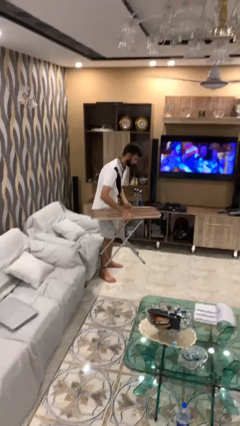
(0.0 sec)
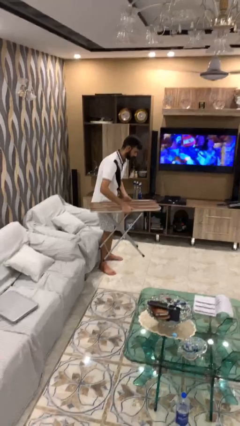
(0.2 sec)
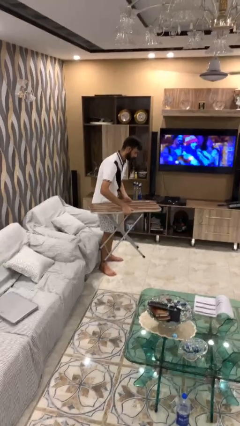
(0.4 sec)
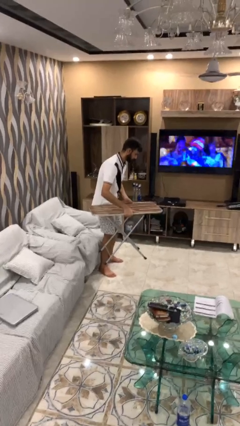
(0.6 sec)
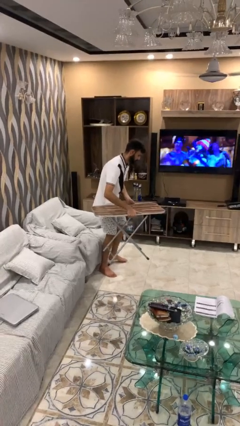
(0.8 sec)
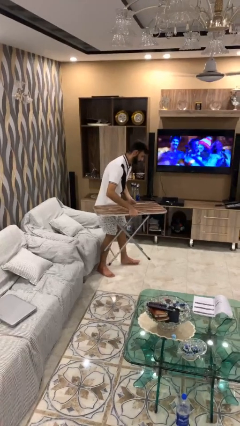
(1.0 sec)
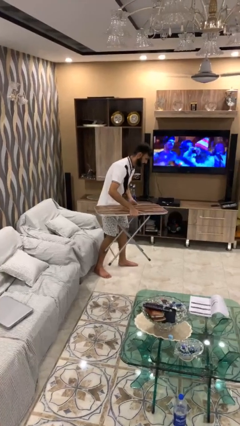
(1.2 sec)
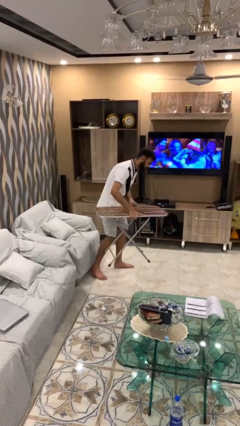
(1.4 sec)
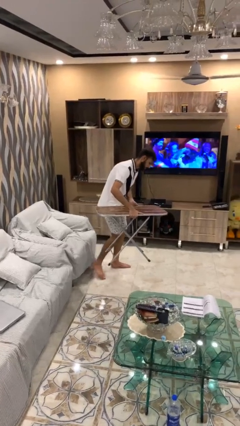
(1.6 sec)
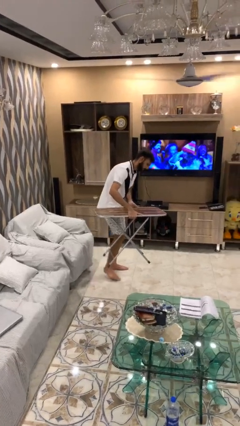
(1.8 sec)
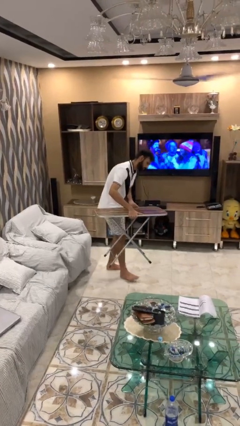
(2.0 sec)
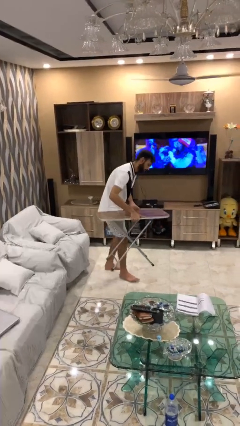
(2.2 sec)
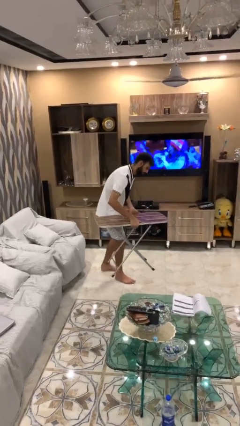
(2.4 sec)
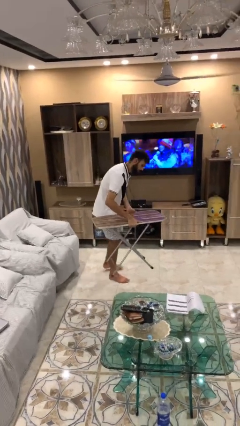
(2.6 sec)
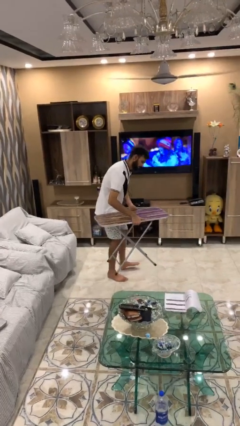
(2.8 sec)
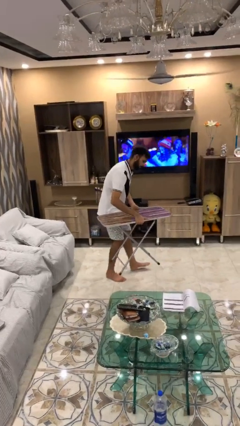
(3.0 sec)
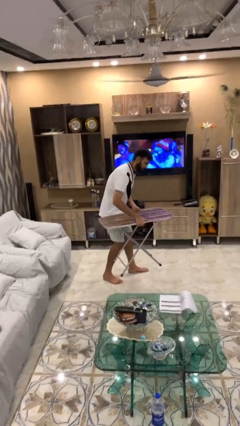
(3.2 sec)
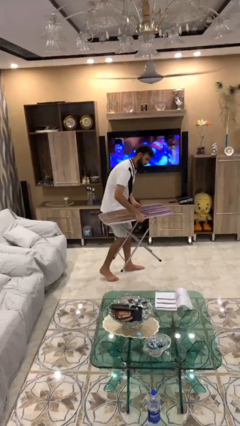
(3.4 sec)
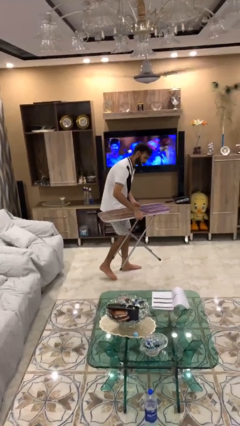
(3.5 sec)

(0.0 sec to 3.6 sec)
person carries heavy object

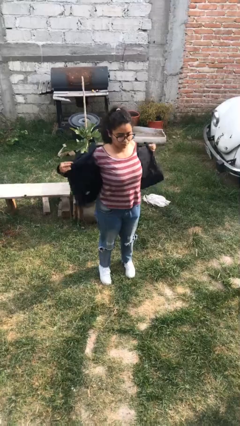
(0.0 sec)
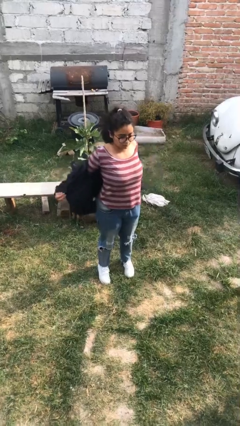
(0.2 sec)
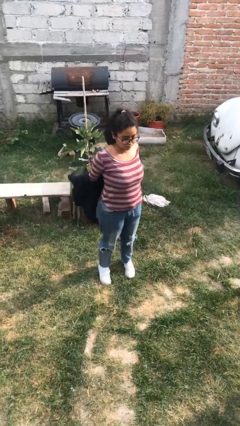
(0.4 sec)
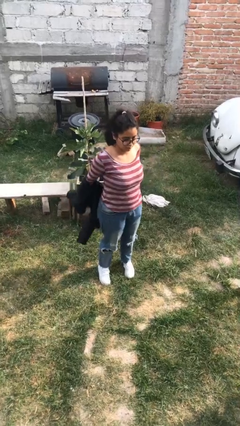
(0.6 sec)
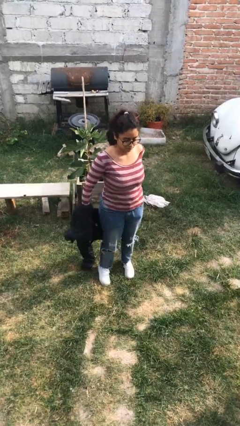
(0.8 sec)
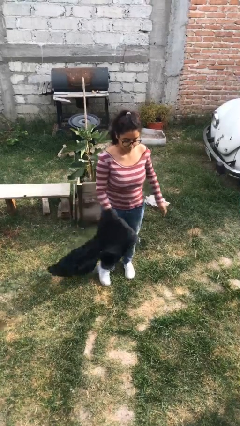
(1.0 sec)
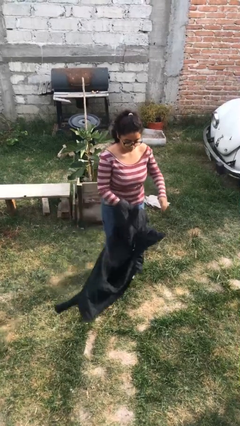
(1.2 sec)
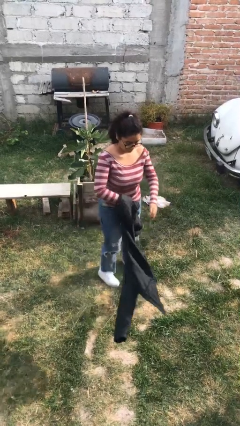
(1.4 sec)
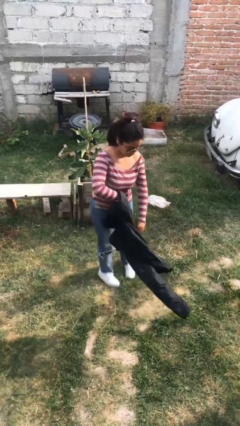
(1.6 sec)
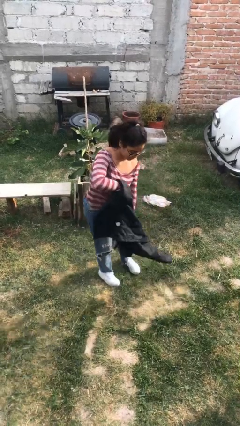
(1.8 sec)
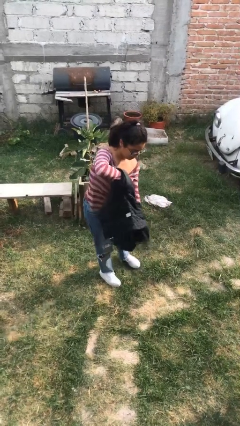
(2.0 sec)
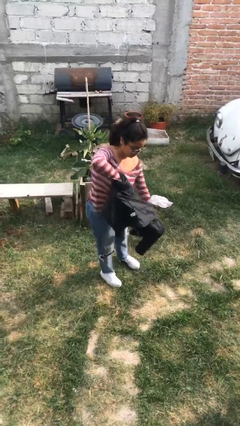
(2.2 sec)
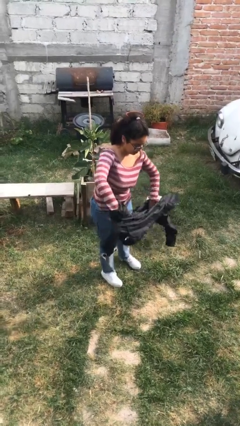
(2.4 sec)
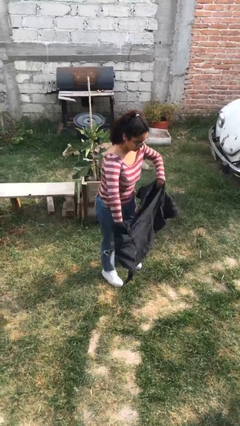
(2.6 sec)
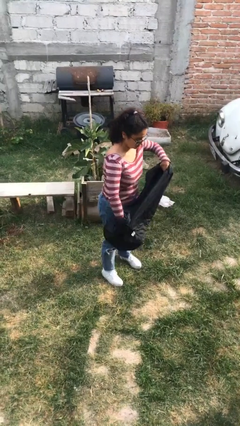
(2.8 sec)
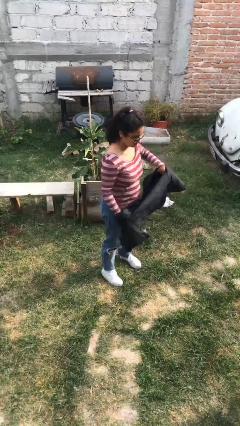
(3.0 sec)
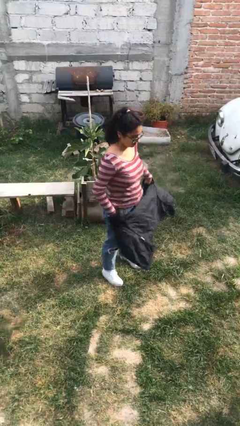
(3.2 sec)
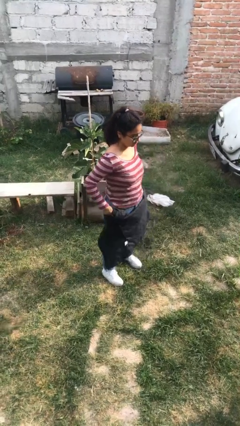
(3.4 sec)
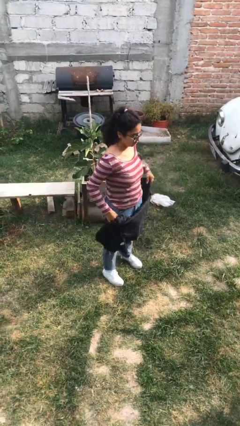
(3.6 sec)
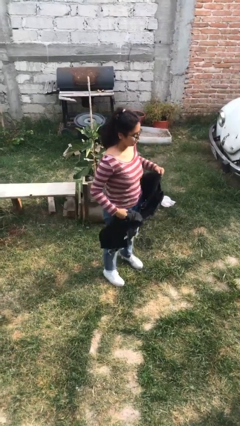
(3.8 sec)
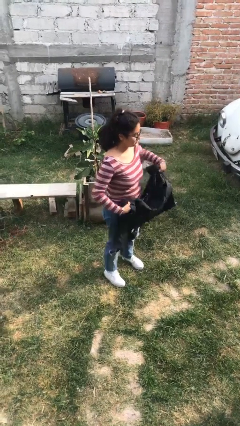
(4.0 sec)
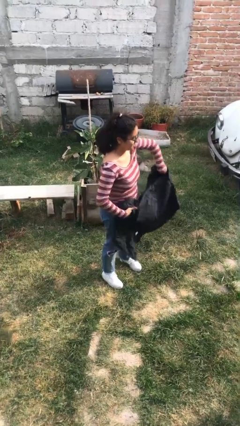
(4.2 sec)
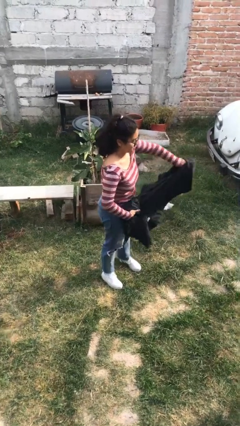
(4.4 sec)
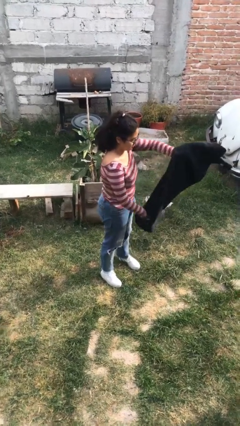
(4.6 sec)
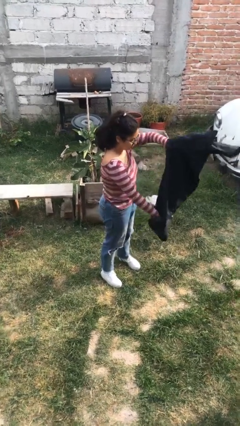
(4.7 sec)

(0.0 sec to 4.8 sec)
person takes off jacket

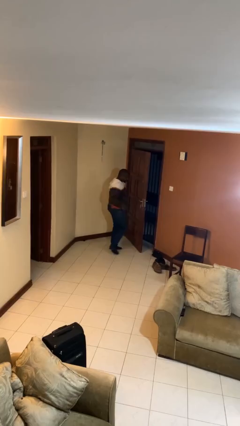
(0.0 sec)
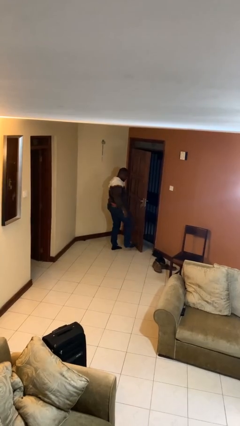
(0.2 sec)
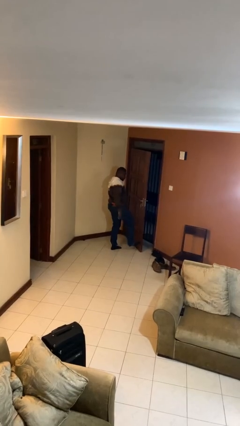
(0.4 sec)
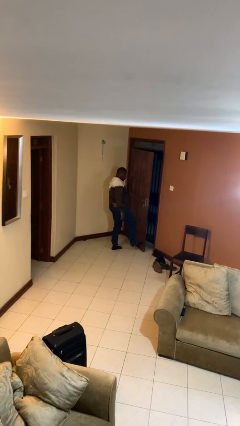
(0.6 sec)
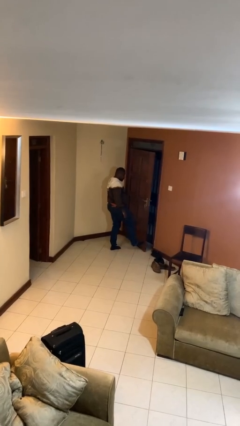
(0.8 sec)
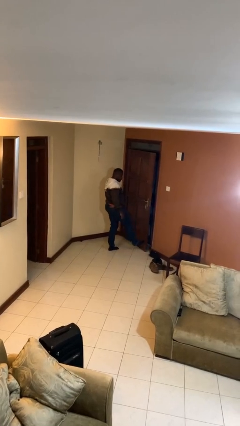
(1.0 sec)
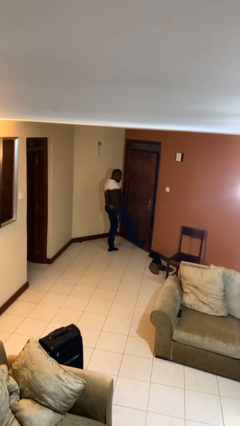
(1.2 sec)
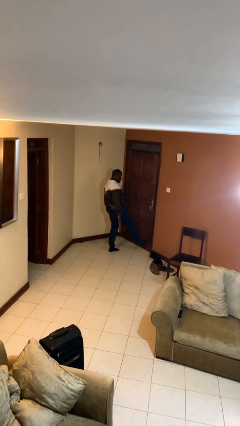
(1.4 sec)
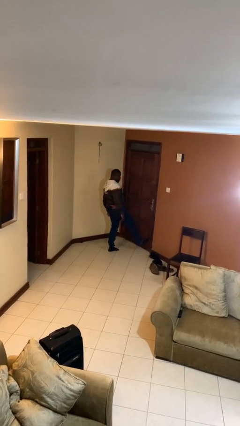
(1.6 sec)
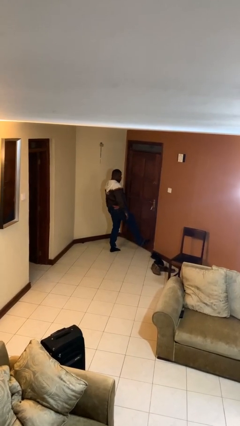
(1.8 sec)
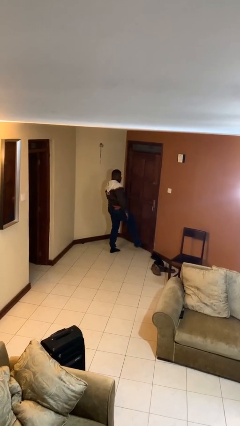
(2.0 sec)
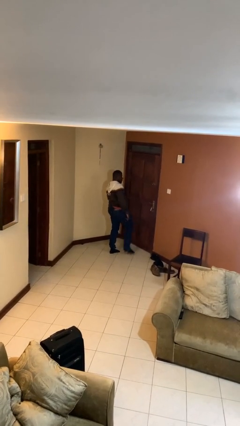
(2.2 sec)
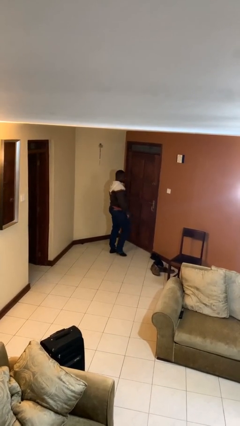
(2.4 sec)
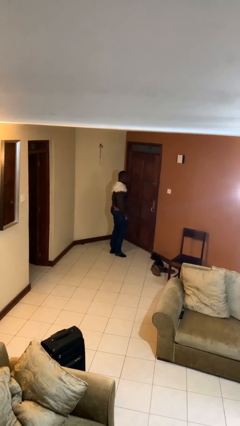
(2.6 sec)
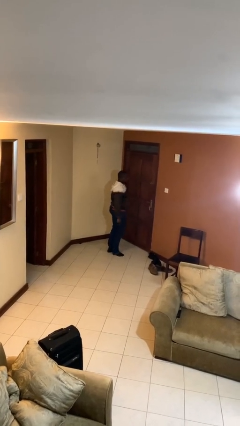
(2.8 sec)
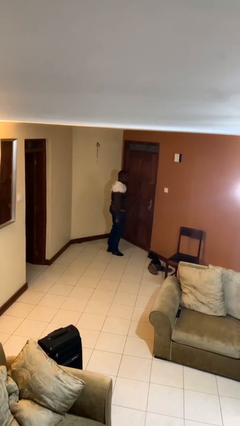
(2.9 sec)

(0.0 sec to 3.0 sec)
person closes door with foot

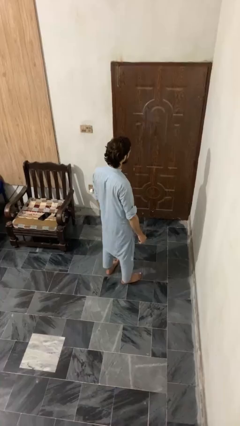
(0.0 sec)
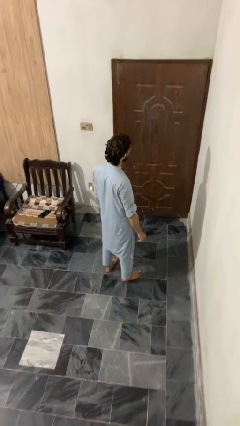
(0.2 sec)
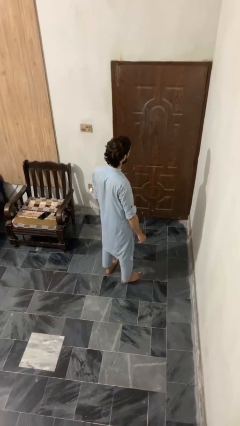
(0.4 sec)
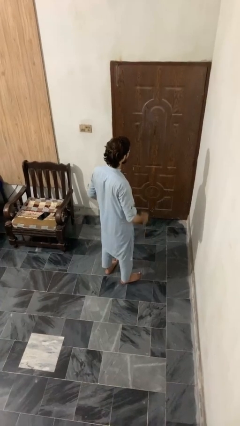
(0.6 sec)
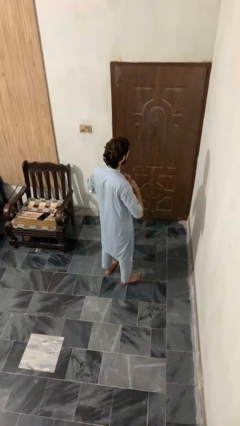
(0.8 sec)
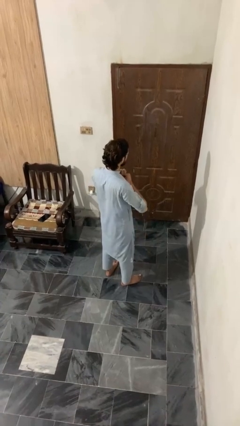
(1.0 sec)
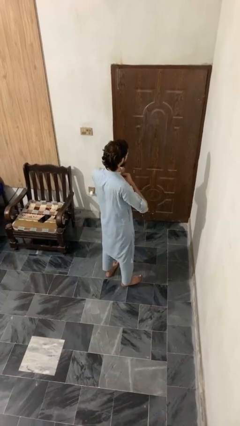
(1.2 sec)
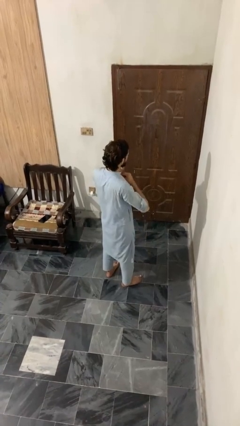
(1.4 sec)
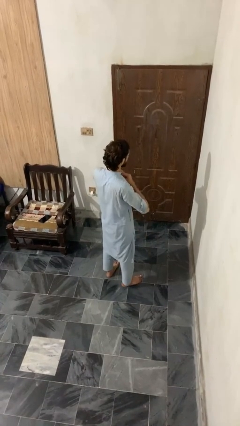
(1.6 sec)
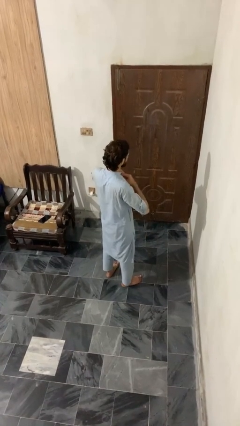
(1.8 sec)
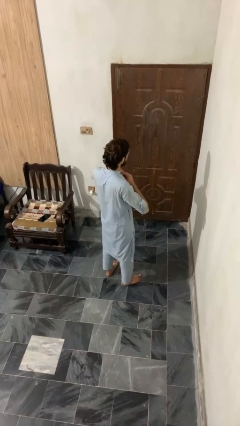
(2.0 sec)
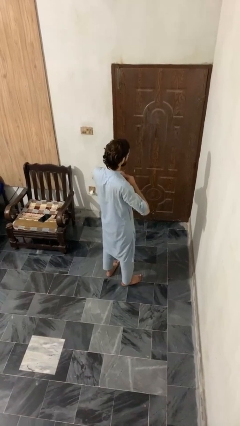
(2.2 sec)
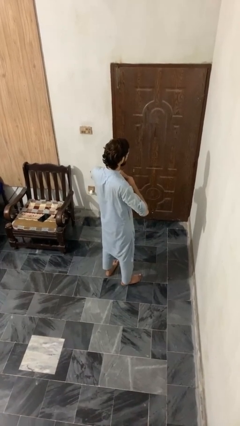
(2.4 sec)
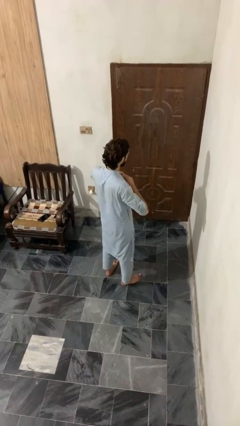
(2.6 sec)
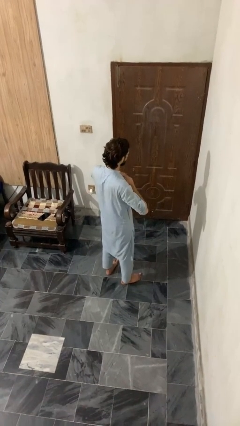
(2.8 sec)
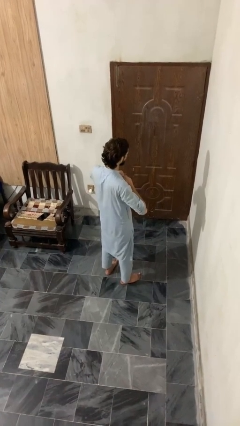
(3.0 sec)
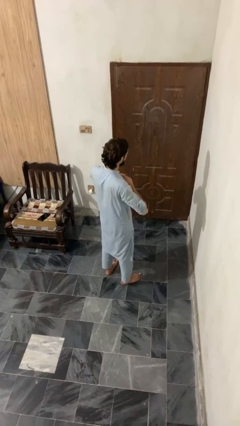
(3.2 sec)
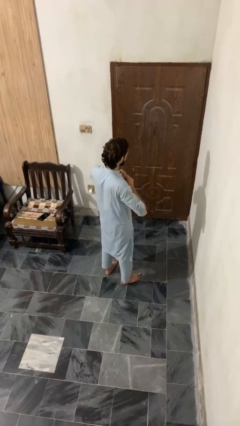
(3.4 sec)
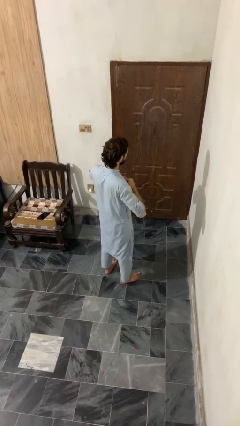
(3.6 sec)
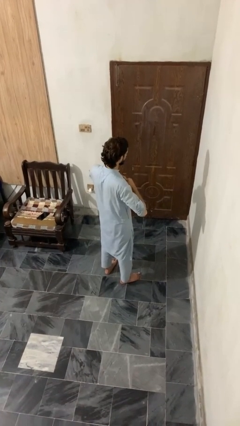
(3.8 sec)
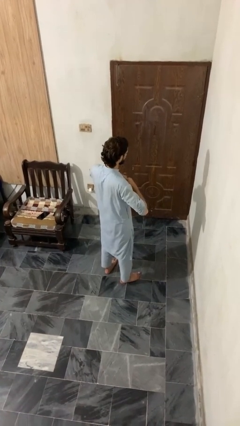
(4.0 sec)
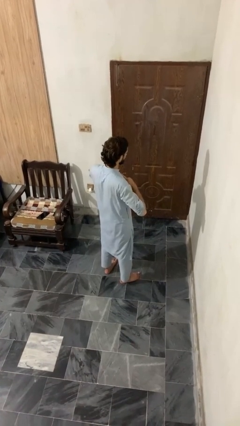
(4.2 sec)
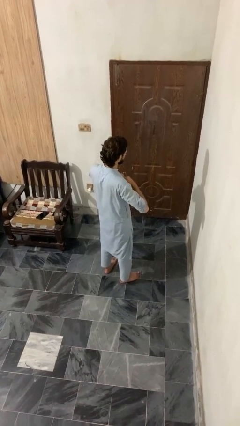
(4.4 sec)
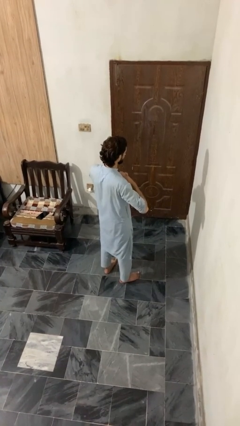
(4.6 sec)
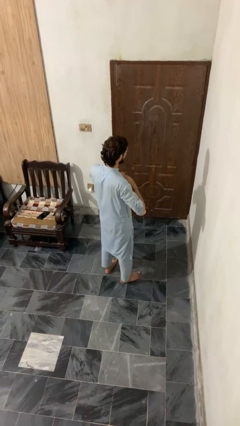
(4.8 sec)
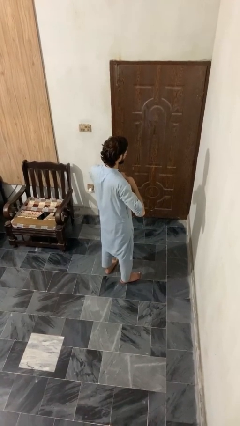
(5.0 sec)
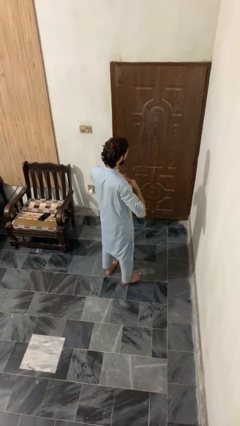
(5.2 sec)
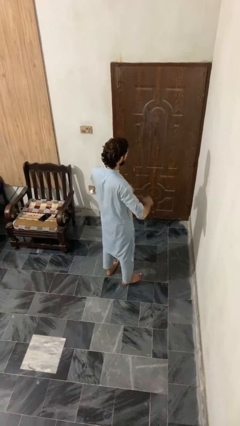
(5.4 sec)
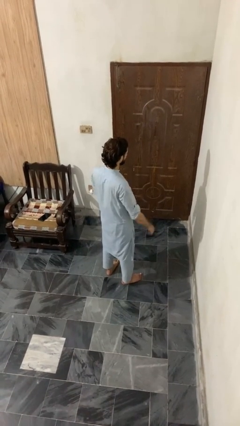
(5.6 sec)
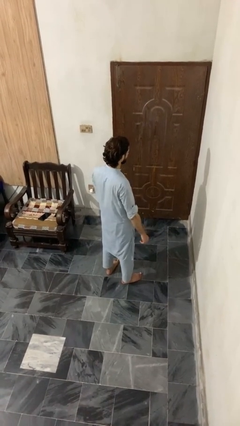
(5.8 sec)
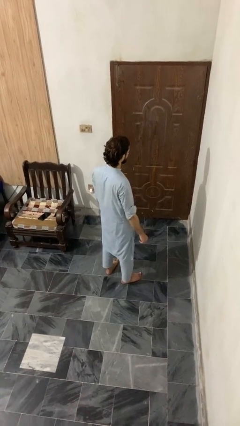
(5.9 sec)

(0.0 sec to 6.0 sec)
person unbuttons shirt
